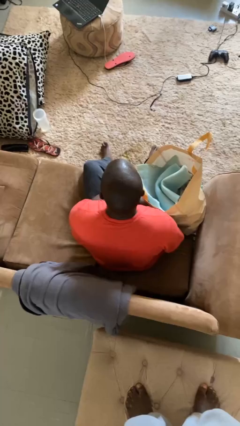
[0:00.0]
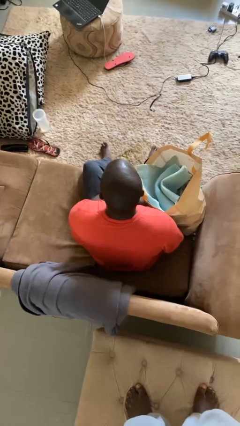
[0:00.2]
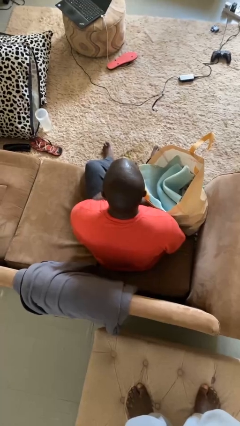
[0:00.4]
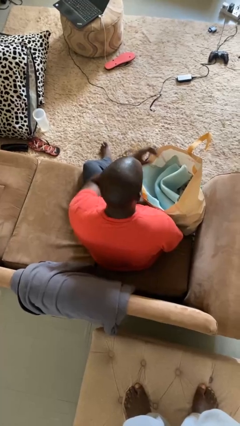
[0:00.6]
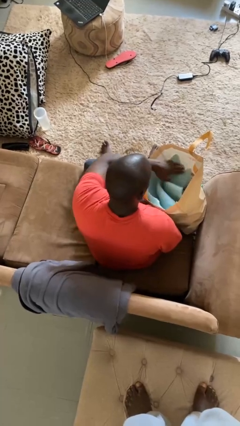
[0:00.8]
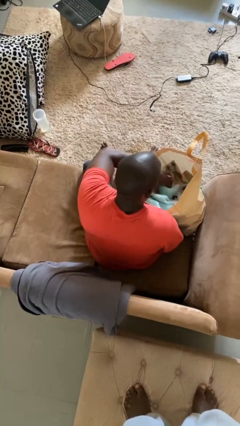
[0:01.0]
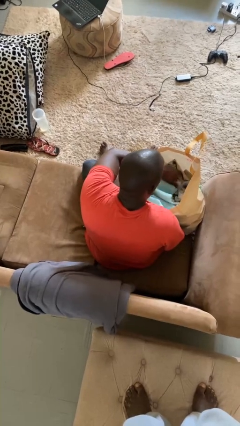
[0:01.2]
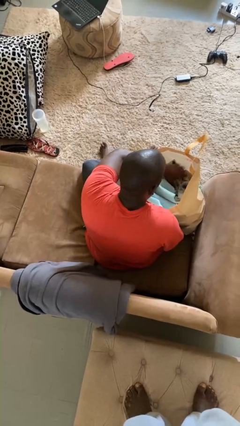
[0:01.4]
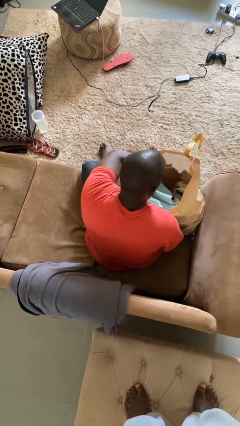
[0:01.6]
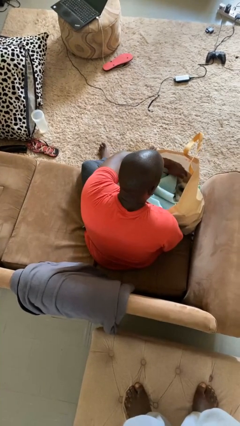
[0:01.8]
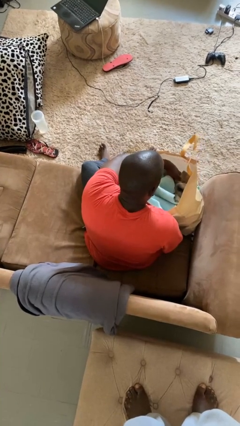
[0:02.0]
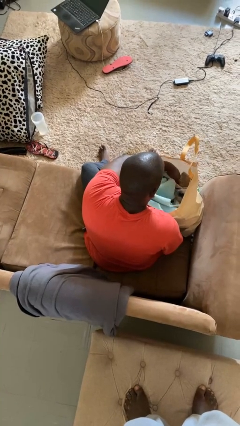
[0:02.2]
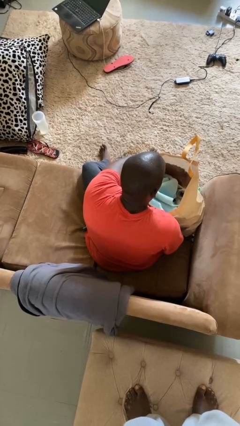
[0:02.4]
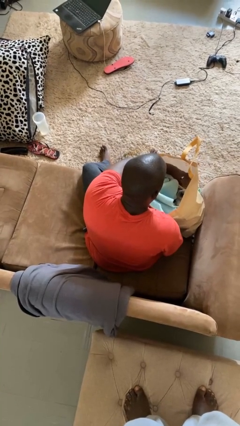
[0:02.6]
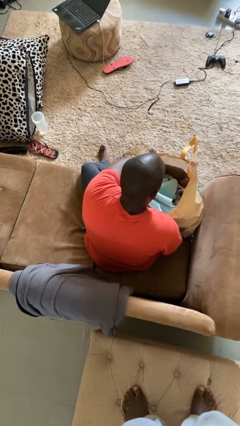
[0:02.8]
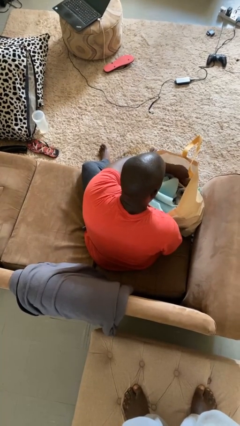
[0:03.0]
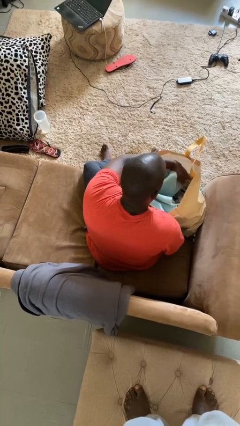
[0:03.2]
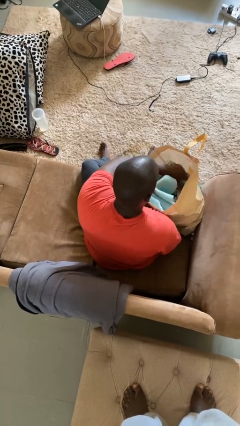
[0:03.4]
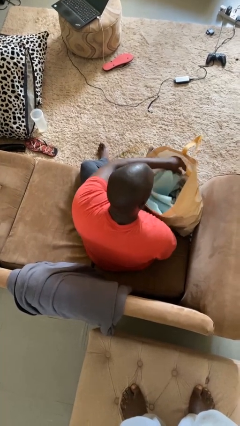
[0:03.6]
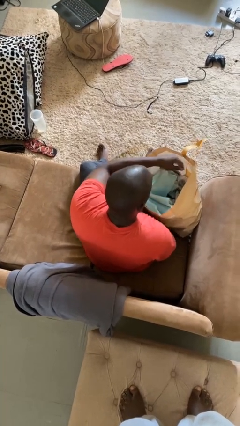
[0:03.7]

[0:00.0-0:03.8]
person searches in bag

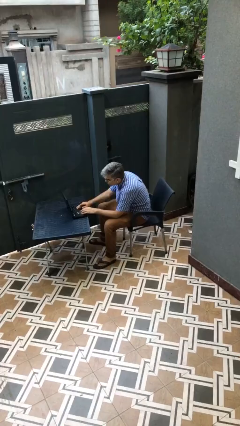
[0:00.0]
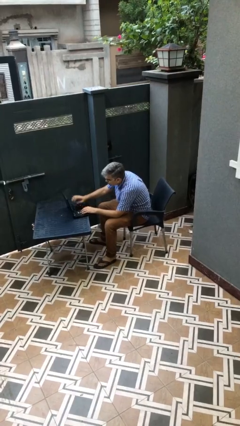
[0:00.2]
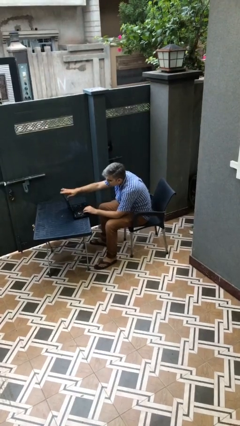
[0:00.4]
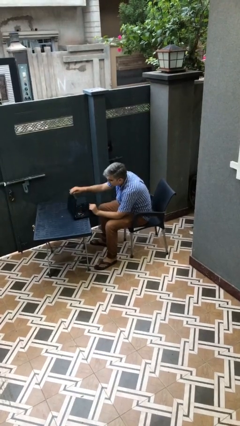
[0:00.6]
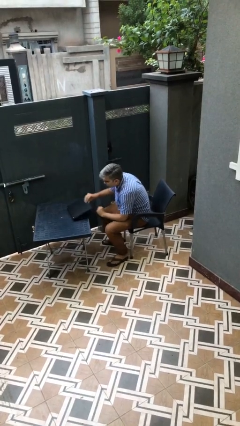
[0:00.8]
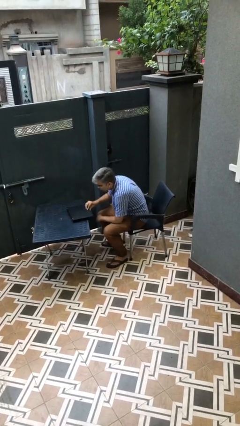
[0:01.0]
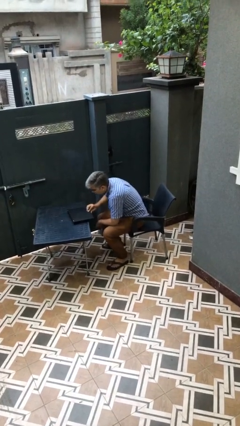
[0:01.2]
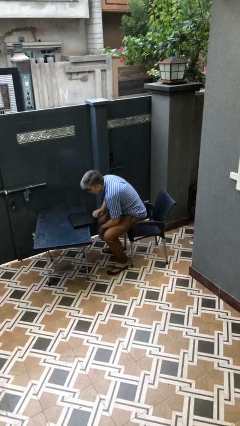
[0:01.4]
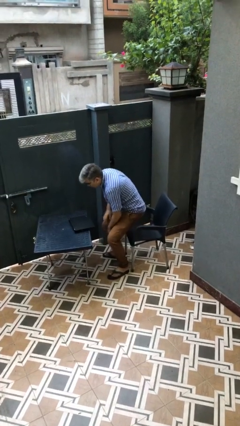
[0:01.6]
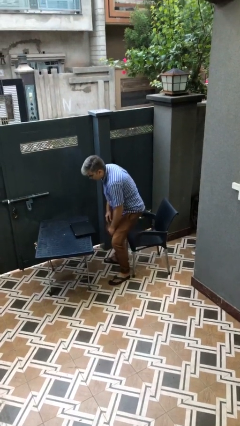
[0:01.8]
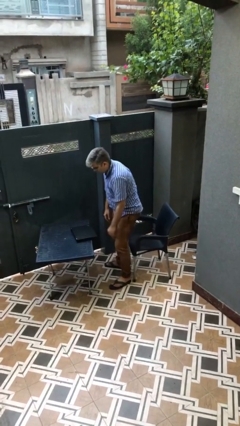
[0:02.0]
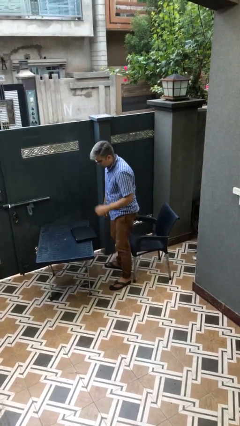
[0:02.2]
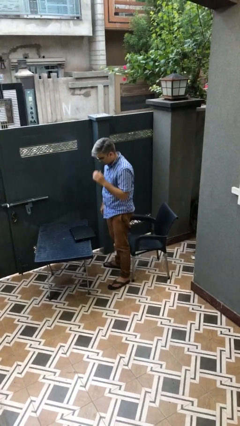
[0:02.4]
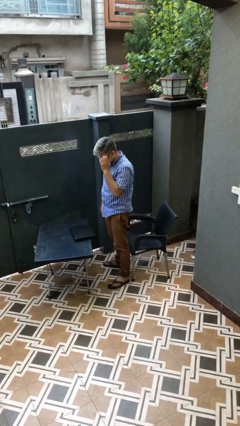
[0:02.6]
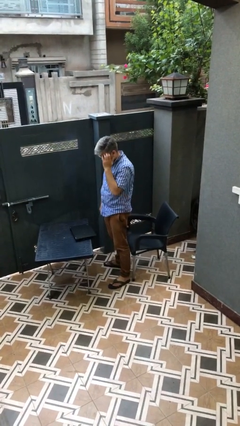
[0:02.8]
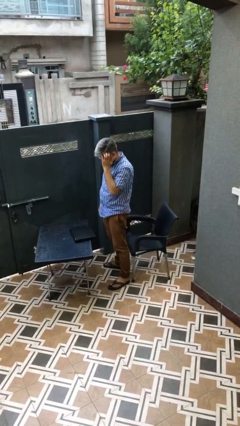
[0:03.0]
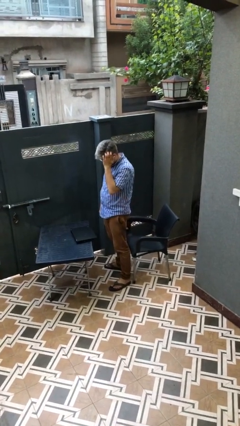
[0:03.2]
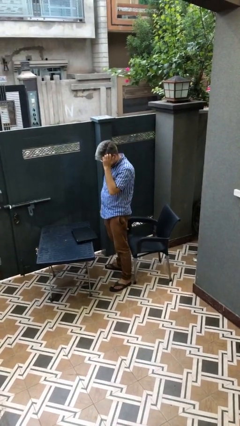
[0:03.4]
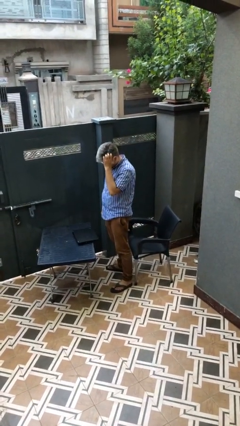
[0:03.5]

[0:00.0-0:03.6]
person stands up

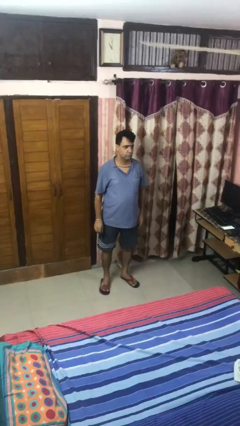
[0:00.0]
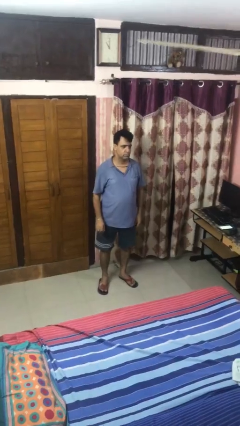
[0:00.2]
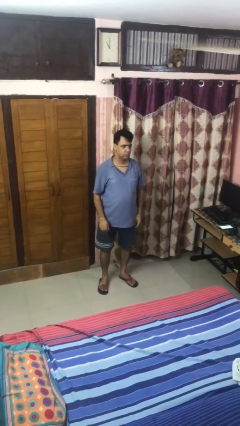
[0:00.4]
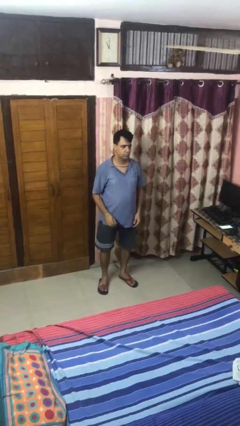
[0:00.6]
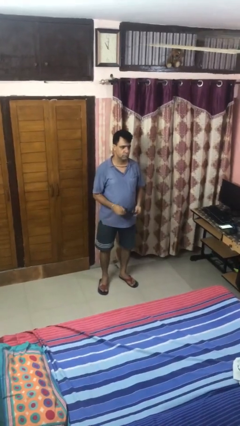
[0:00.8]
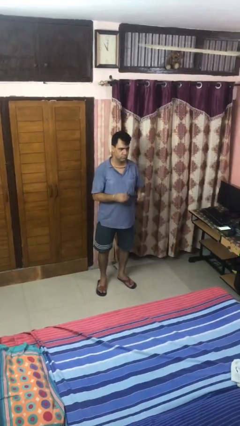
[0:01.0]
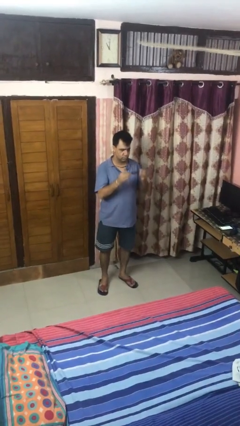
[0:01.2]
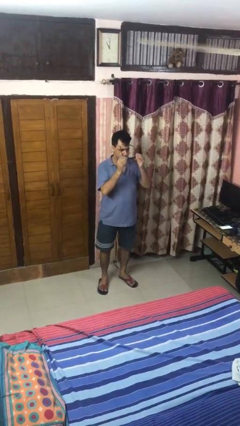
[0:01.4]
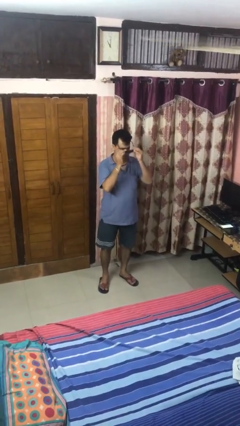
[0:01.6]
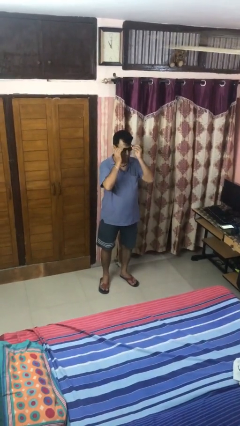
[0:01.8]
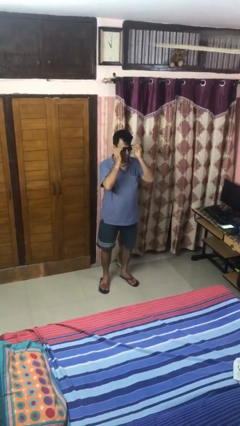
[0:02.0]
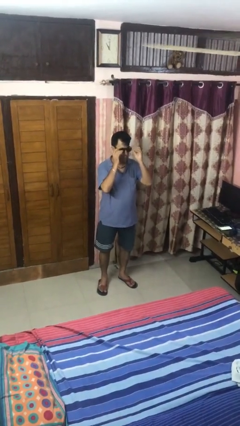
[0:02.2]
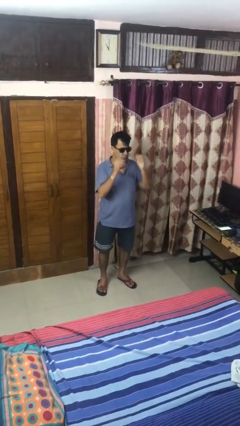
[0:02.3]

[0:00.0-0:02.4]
person puts on sunglasses

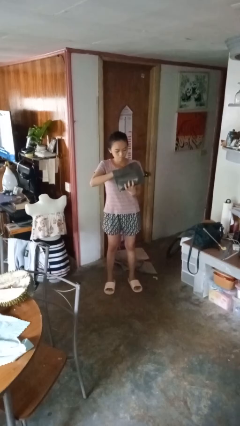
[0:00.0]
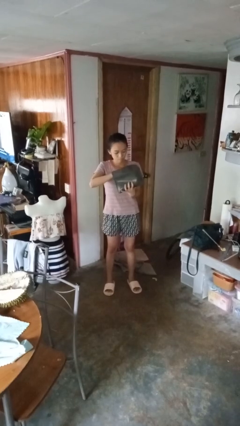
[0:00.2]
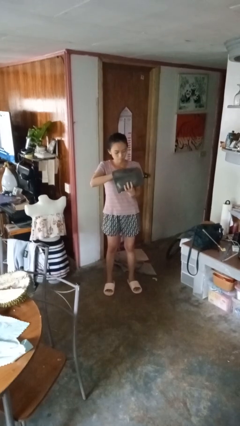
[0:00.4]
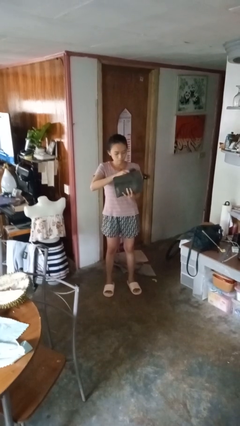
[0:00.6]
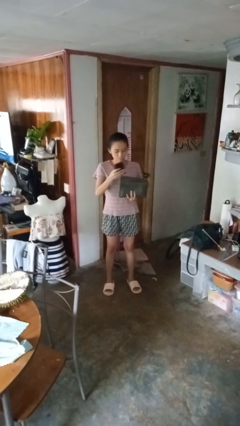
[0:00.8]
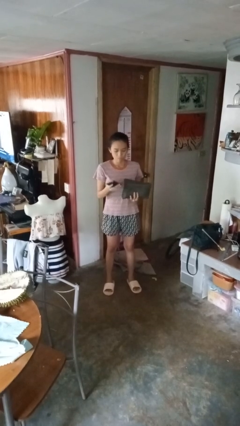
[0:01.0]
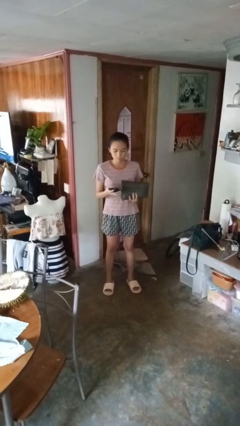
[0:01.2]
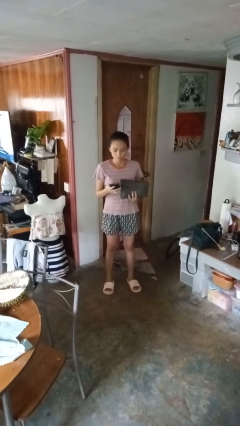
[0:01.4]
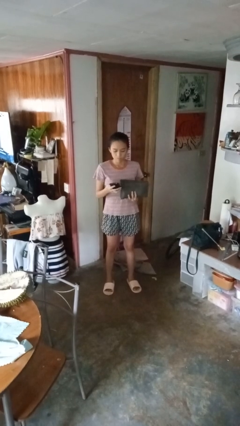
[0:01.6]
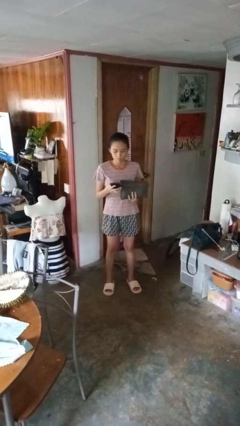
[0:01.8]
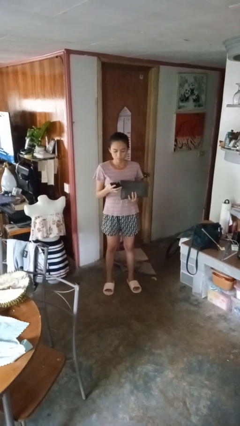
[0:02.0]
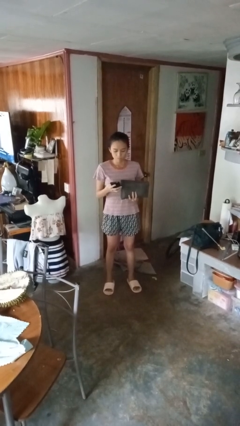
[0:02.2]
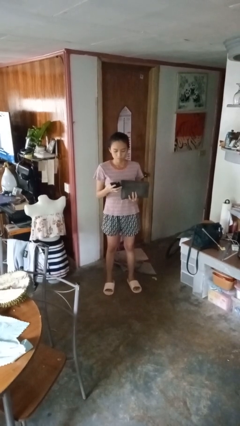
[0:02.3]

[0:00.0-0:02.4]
person takes object from purse

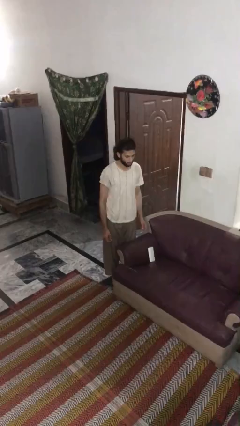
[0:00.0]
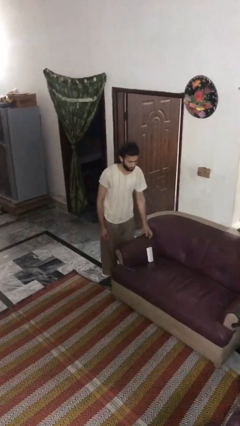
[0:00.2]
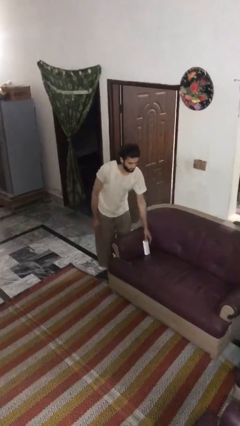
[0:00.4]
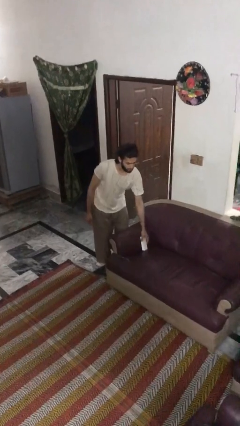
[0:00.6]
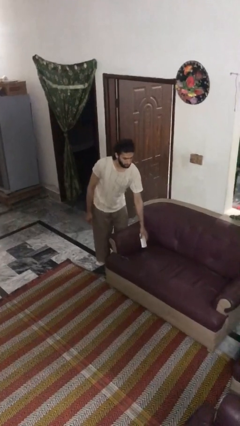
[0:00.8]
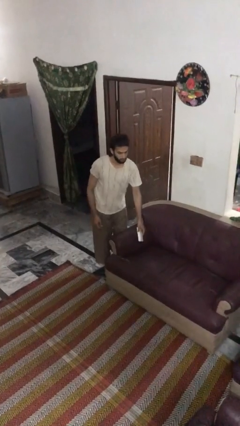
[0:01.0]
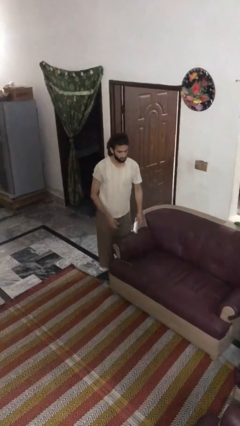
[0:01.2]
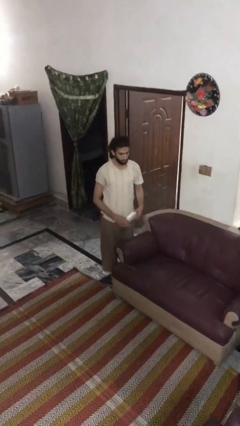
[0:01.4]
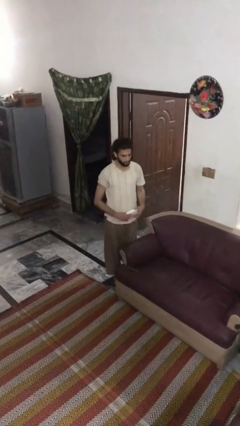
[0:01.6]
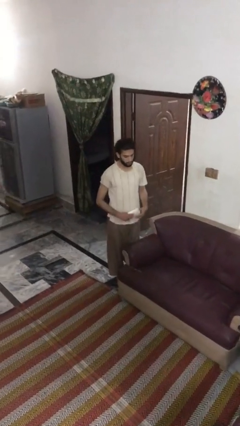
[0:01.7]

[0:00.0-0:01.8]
person picks up object from couch

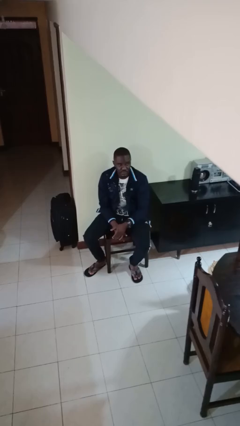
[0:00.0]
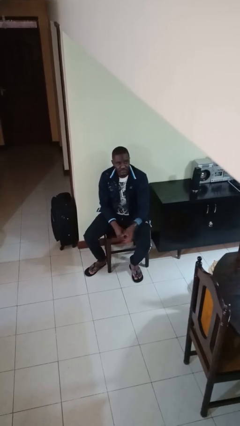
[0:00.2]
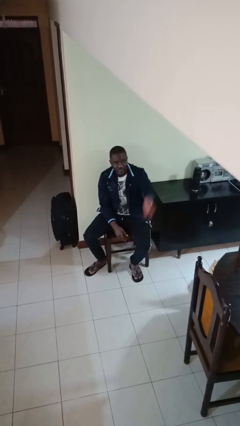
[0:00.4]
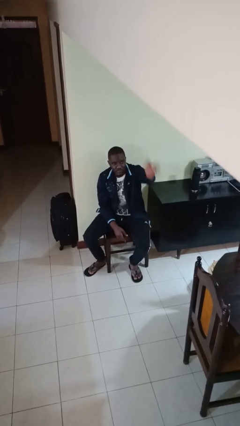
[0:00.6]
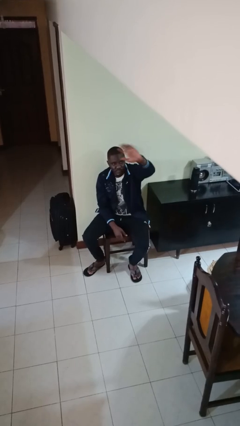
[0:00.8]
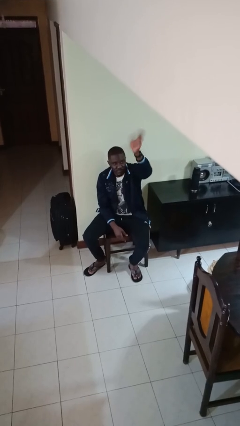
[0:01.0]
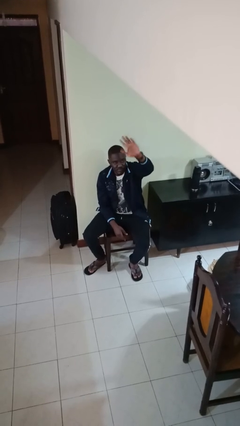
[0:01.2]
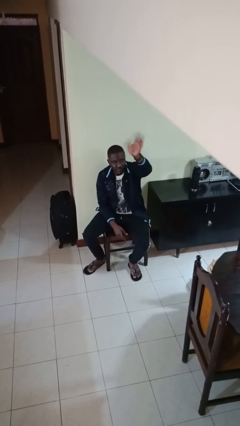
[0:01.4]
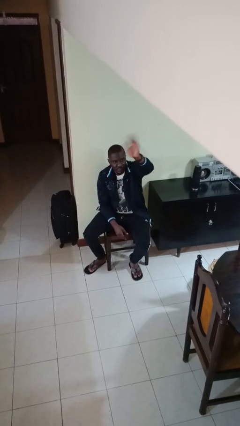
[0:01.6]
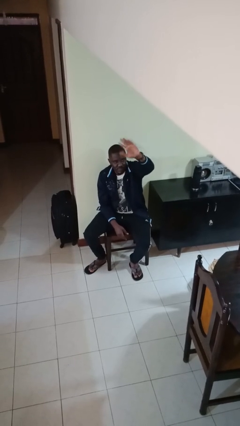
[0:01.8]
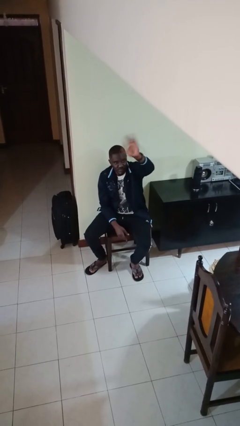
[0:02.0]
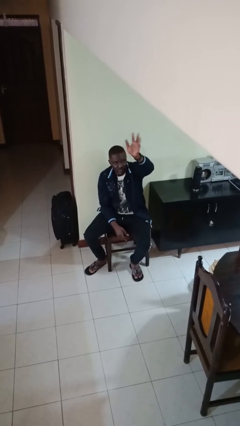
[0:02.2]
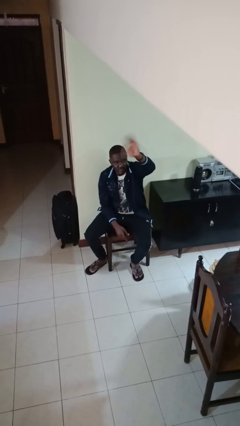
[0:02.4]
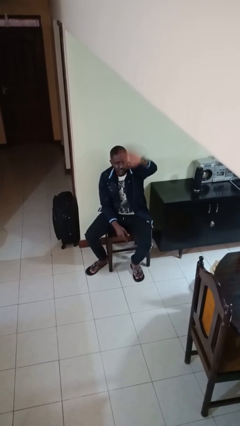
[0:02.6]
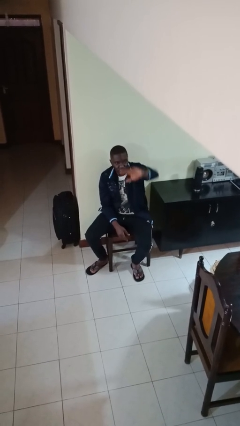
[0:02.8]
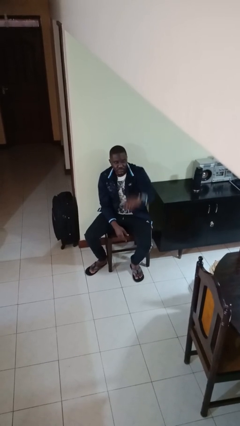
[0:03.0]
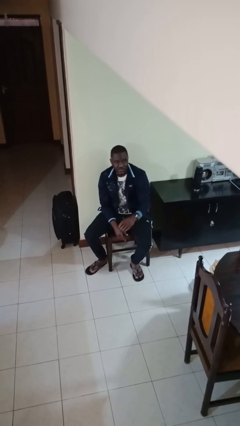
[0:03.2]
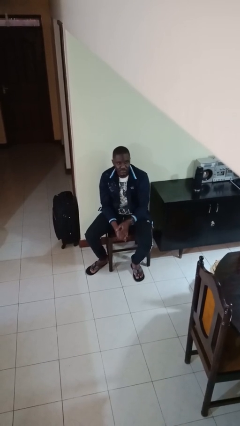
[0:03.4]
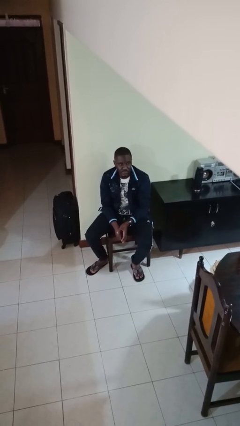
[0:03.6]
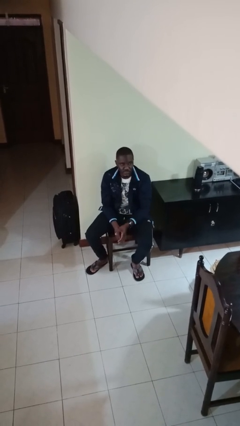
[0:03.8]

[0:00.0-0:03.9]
person waves at person
